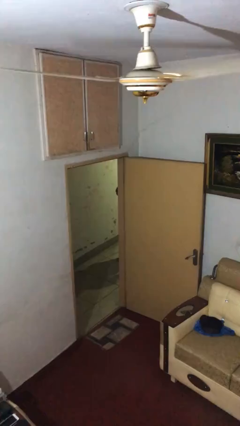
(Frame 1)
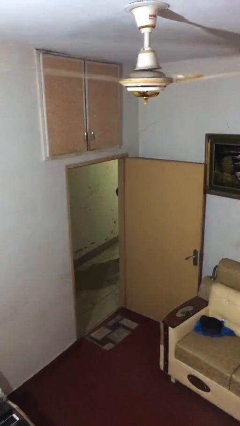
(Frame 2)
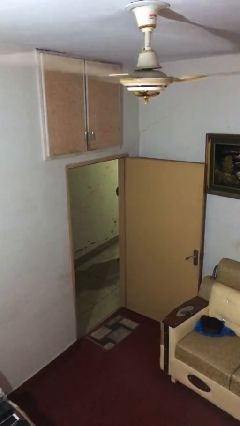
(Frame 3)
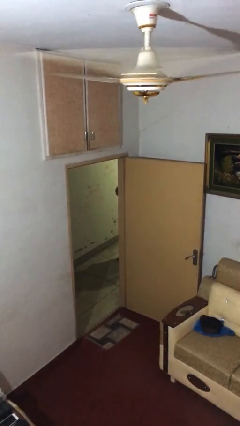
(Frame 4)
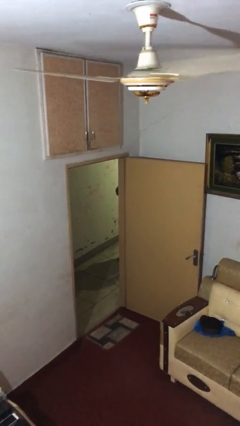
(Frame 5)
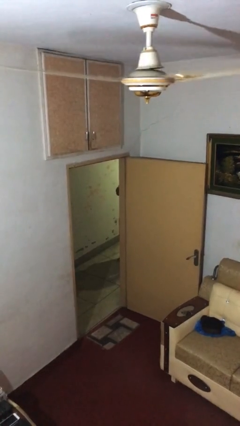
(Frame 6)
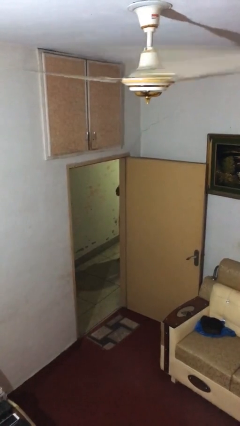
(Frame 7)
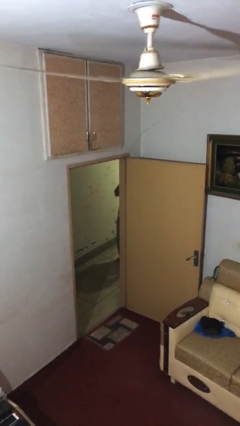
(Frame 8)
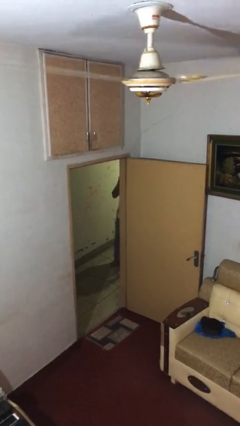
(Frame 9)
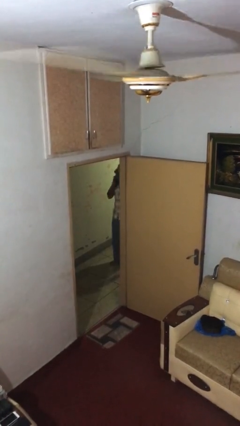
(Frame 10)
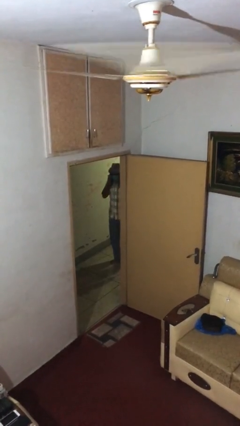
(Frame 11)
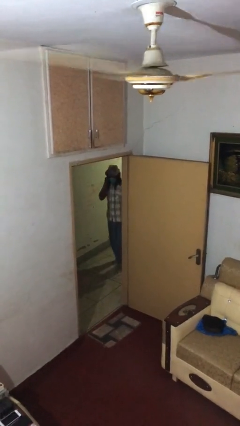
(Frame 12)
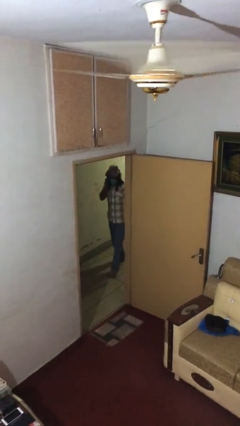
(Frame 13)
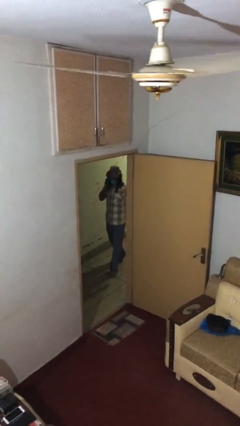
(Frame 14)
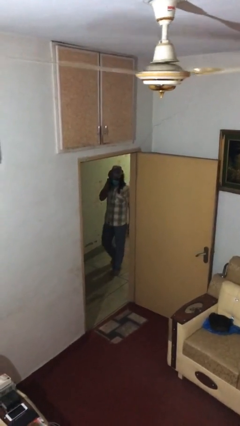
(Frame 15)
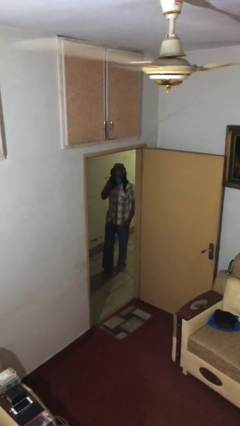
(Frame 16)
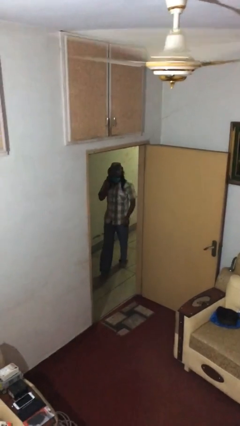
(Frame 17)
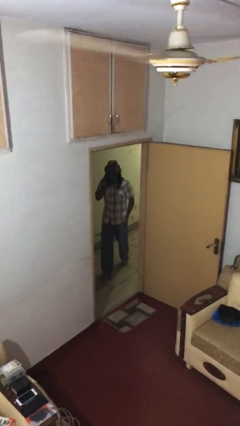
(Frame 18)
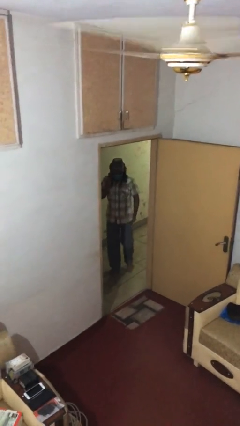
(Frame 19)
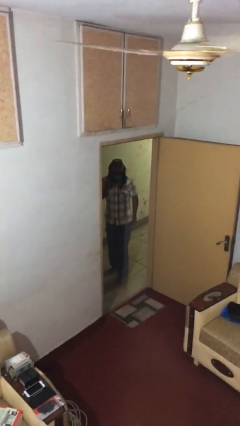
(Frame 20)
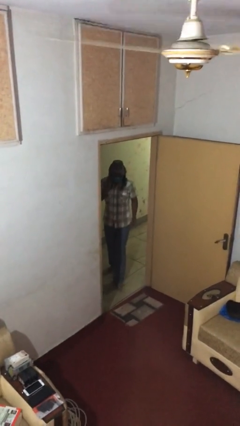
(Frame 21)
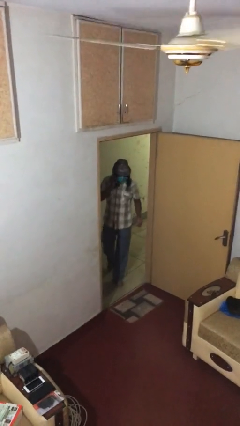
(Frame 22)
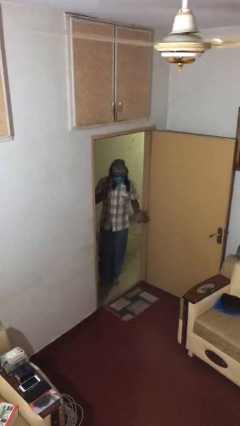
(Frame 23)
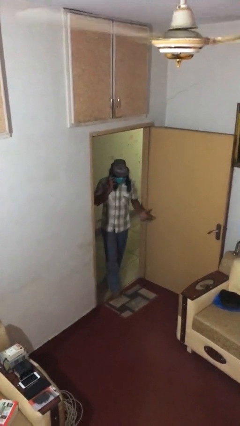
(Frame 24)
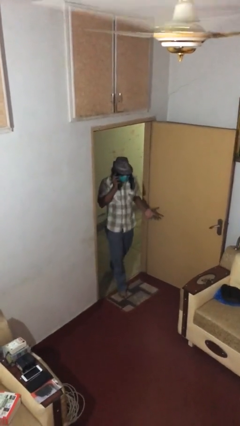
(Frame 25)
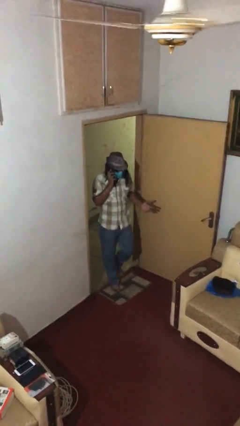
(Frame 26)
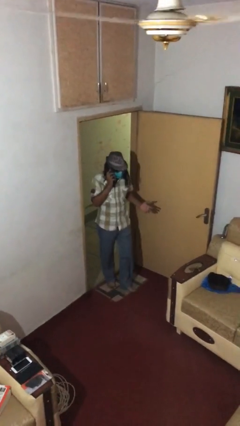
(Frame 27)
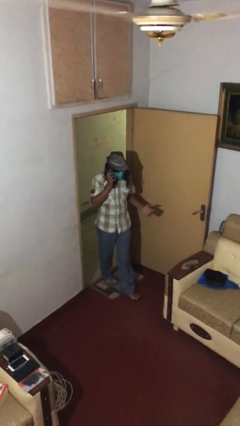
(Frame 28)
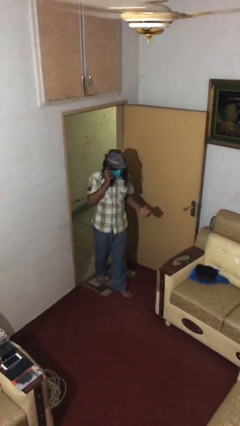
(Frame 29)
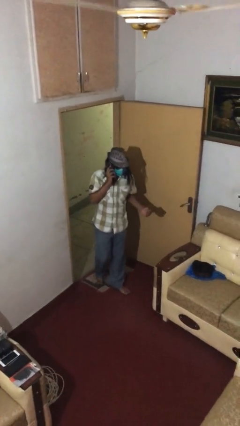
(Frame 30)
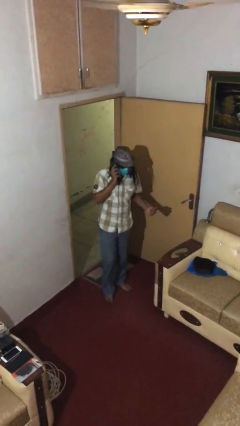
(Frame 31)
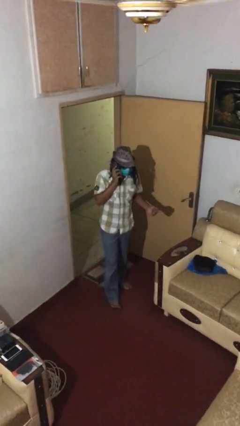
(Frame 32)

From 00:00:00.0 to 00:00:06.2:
person enters scene through structure

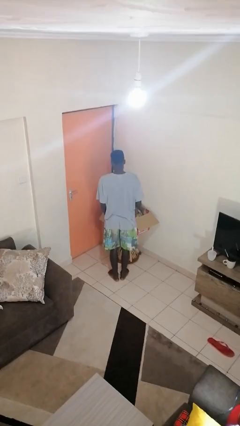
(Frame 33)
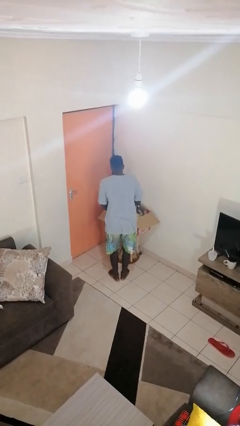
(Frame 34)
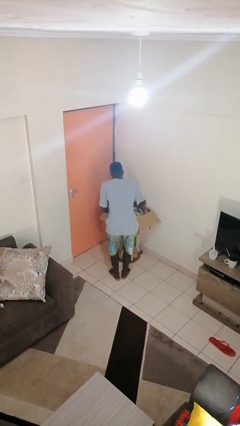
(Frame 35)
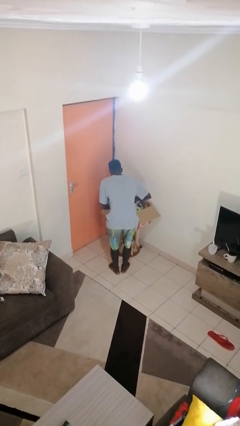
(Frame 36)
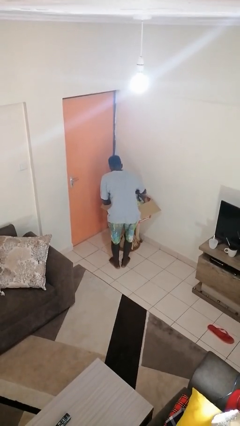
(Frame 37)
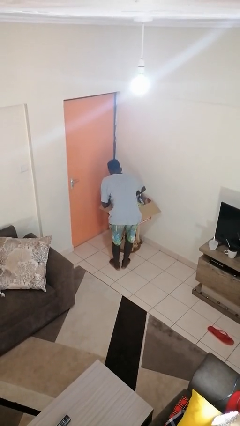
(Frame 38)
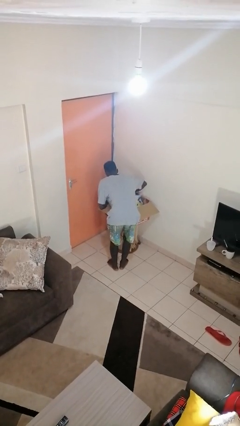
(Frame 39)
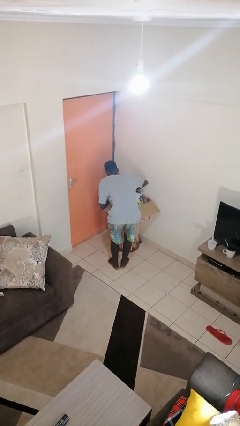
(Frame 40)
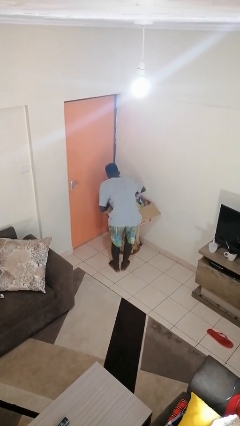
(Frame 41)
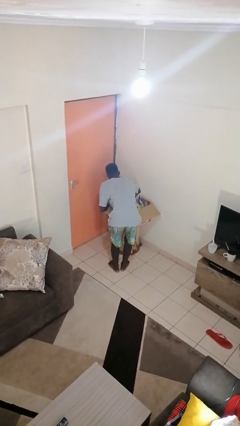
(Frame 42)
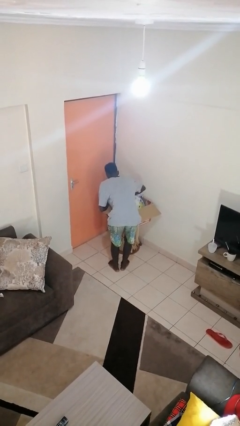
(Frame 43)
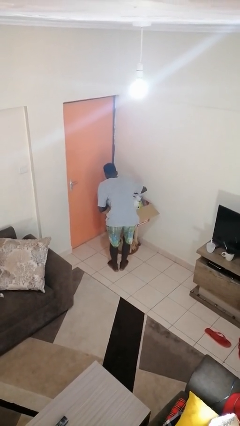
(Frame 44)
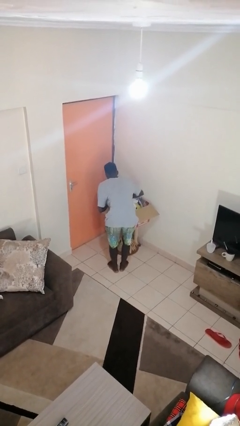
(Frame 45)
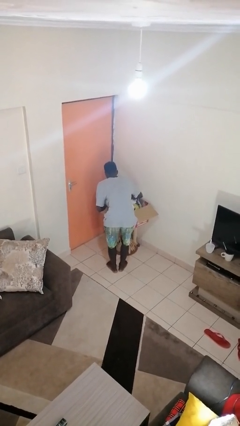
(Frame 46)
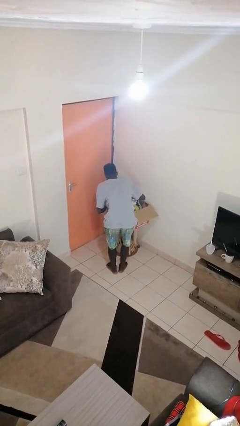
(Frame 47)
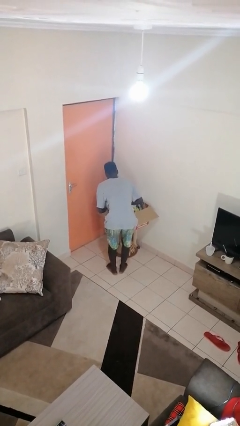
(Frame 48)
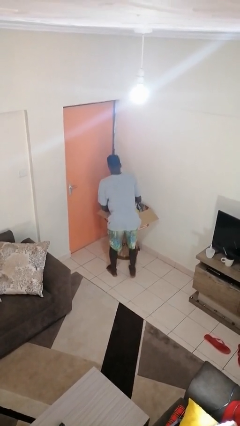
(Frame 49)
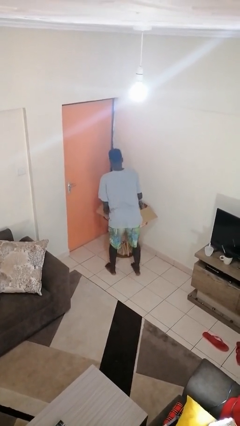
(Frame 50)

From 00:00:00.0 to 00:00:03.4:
person searches in box

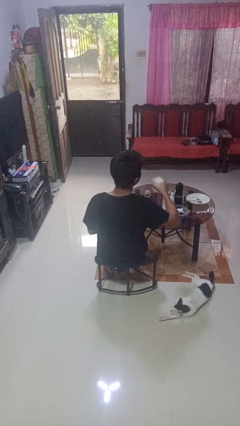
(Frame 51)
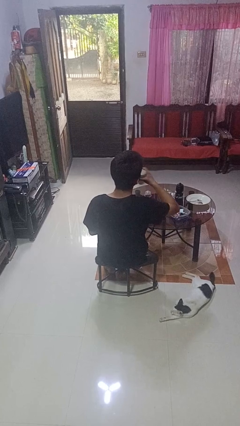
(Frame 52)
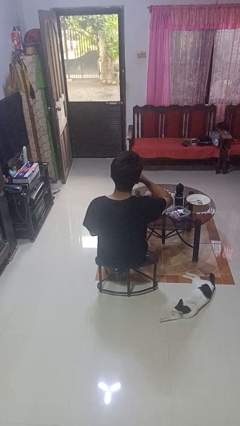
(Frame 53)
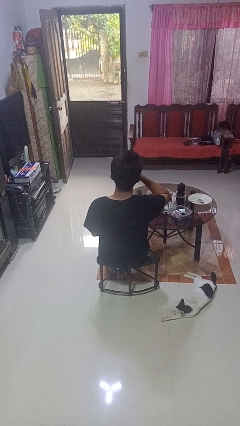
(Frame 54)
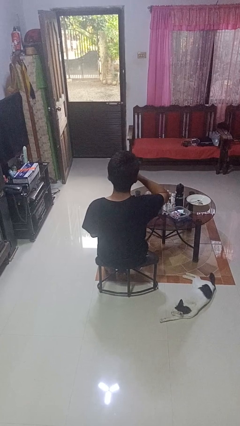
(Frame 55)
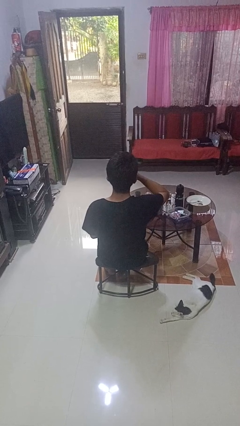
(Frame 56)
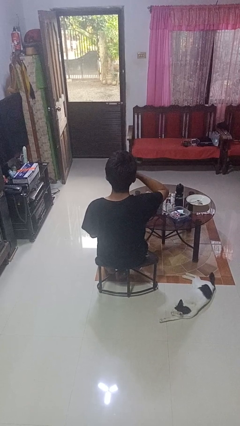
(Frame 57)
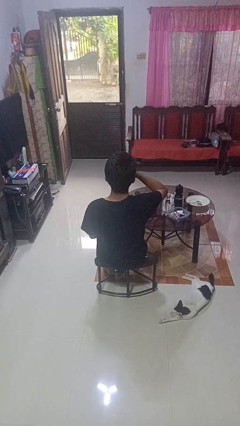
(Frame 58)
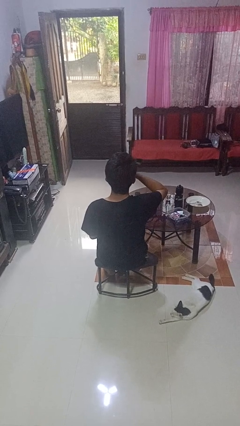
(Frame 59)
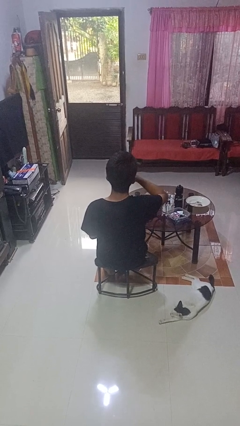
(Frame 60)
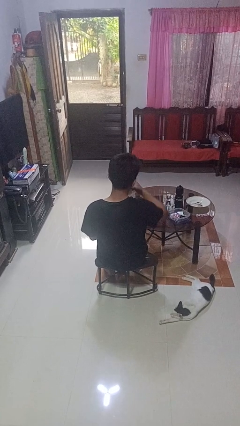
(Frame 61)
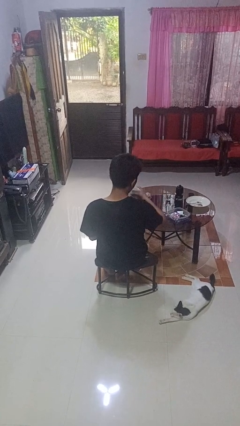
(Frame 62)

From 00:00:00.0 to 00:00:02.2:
person drinks from cup

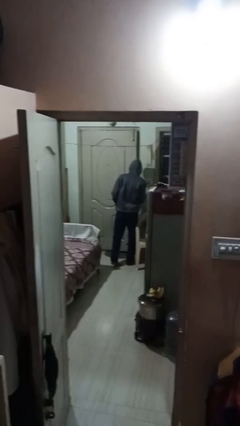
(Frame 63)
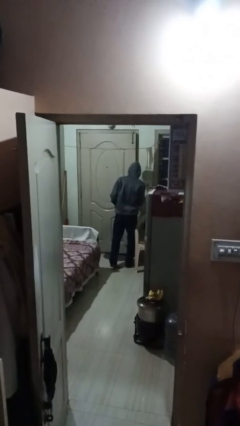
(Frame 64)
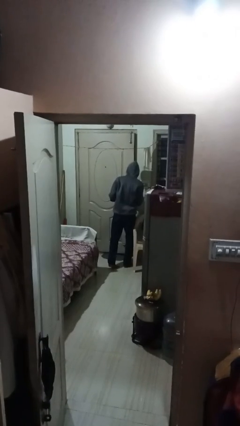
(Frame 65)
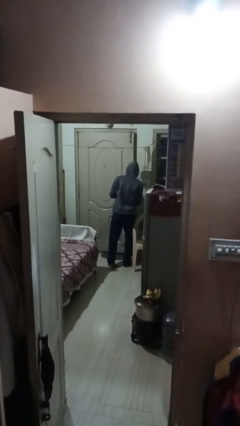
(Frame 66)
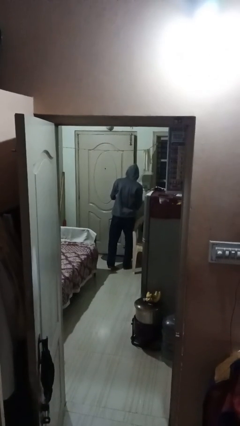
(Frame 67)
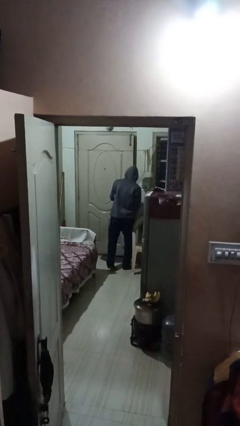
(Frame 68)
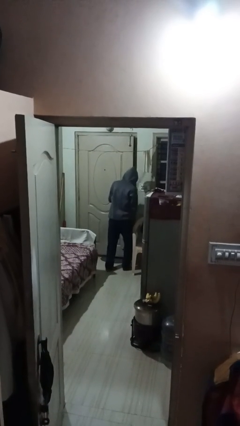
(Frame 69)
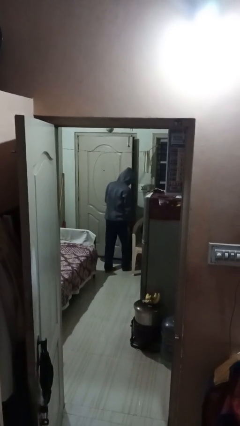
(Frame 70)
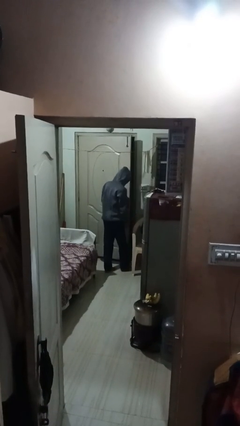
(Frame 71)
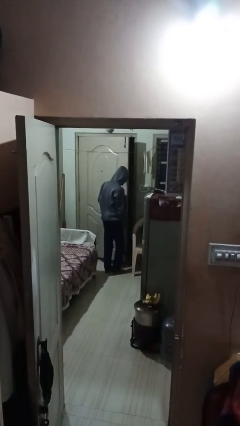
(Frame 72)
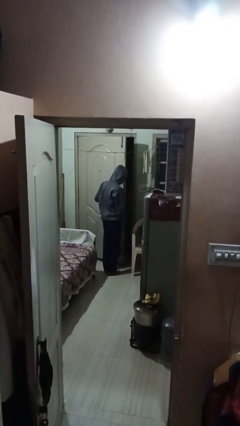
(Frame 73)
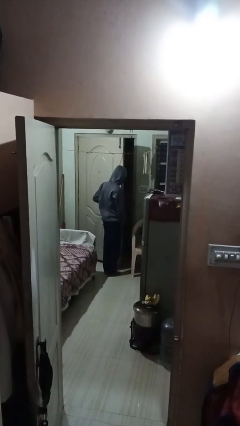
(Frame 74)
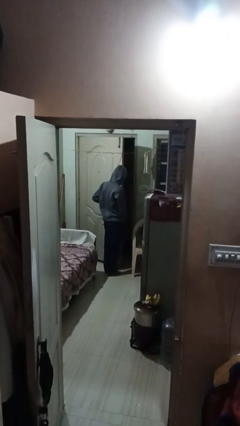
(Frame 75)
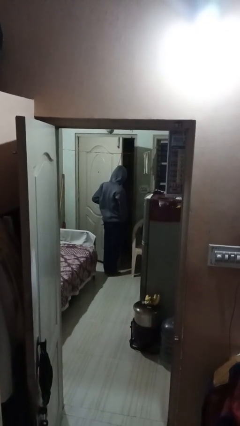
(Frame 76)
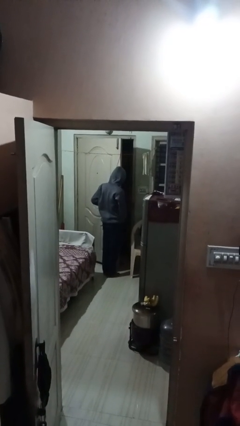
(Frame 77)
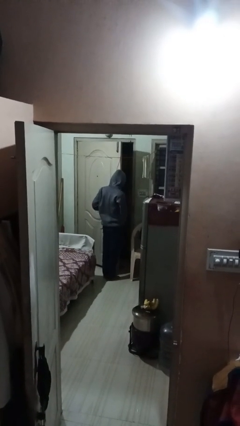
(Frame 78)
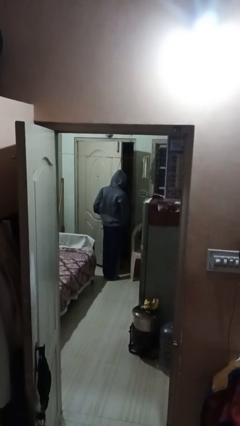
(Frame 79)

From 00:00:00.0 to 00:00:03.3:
person opens facility door

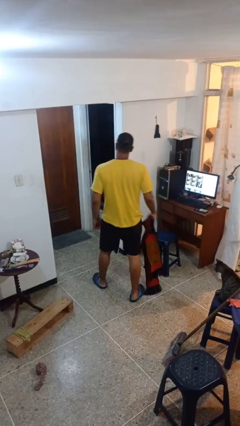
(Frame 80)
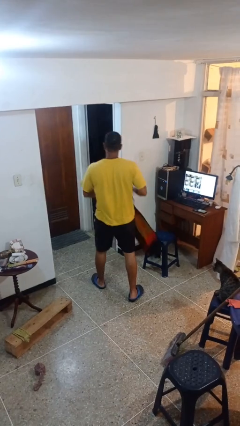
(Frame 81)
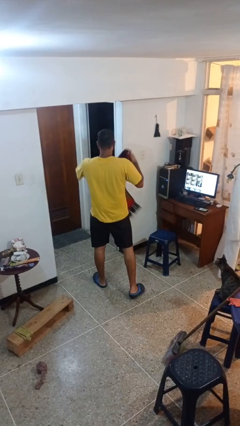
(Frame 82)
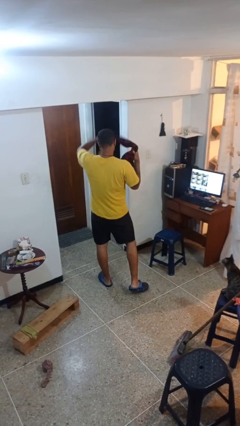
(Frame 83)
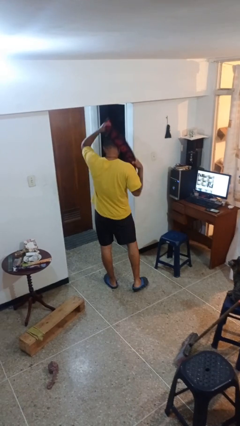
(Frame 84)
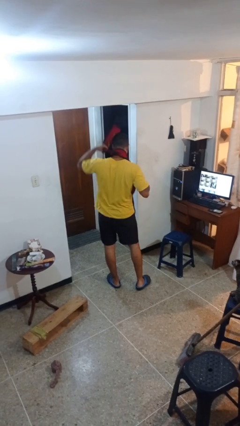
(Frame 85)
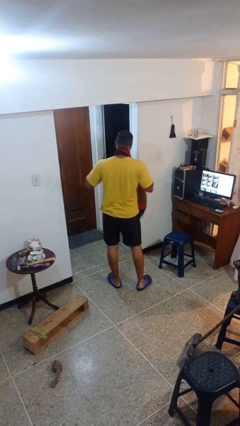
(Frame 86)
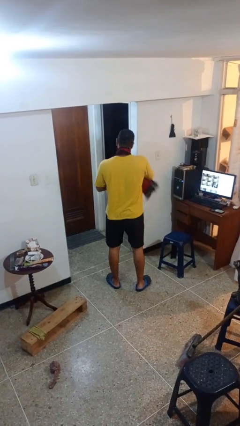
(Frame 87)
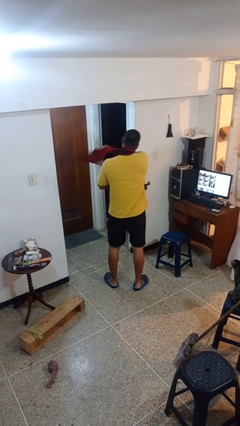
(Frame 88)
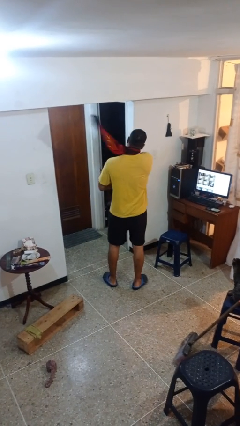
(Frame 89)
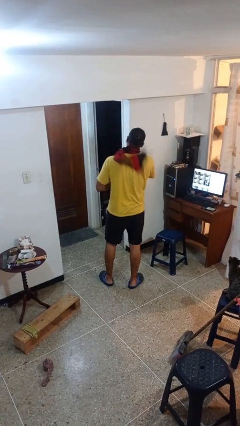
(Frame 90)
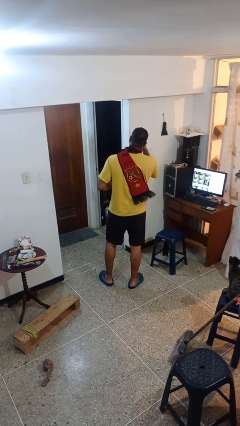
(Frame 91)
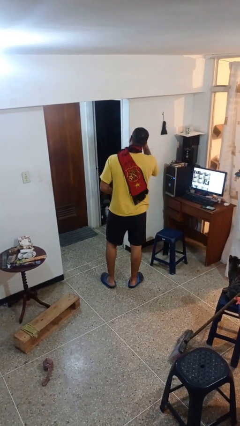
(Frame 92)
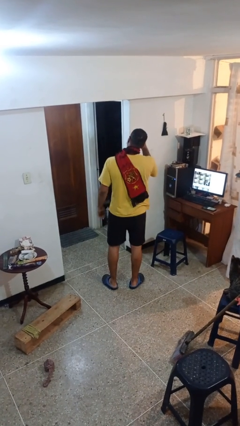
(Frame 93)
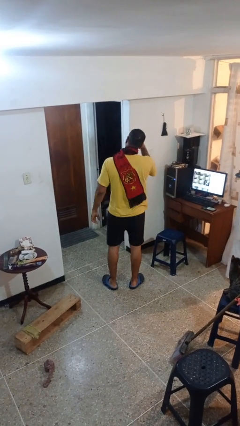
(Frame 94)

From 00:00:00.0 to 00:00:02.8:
person puts on scarf
